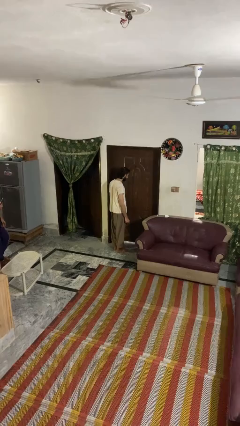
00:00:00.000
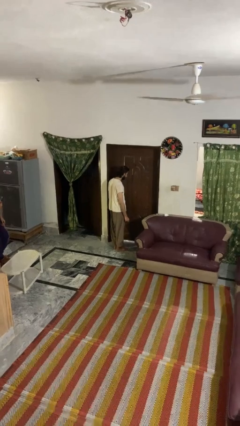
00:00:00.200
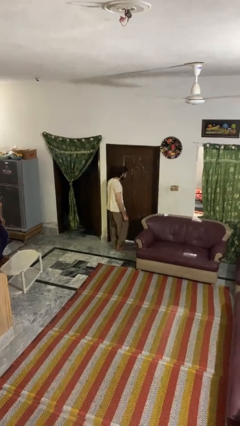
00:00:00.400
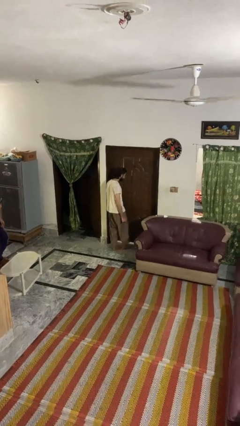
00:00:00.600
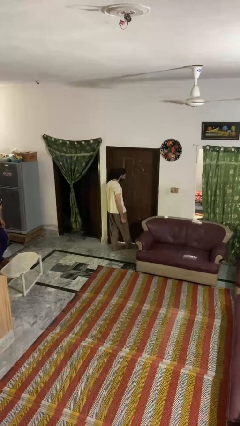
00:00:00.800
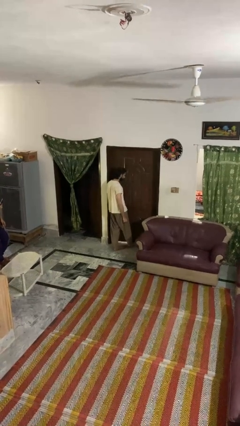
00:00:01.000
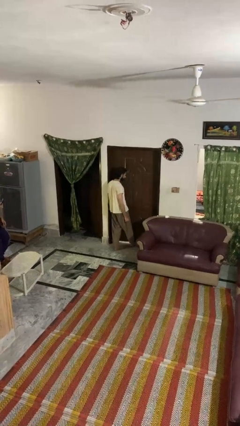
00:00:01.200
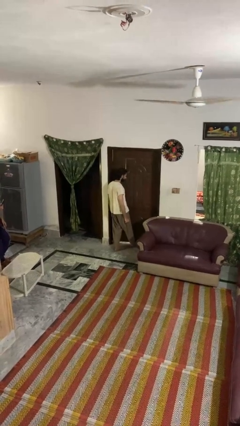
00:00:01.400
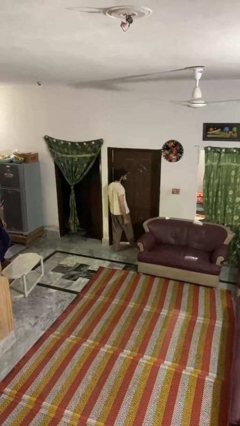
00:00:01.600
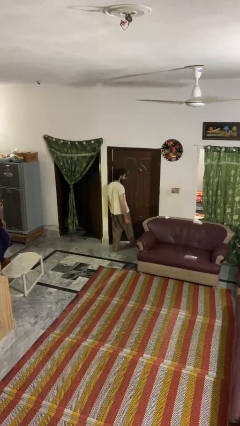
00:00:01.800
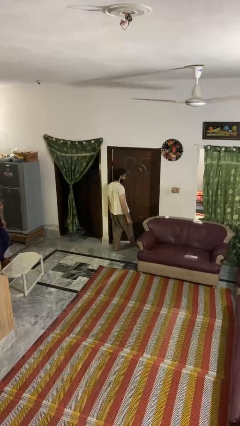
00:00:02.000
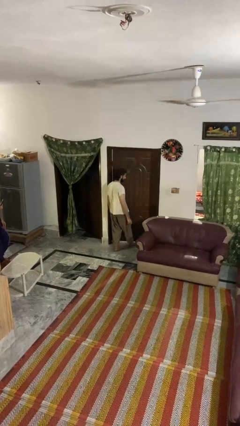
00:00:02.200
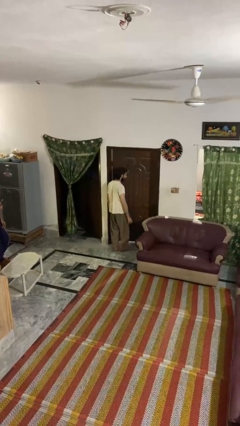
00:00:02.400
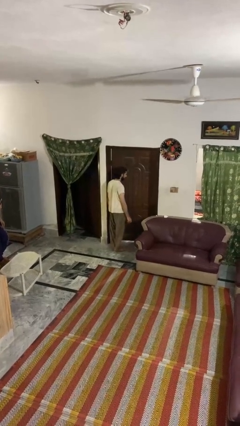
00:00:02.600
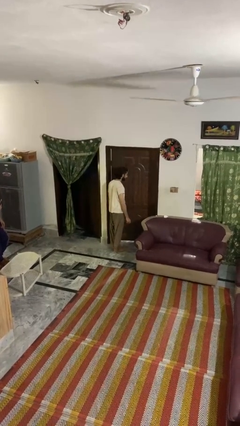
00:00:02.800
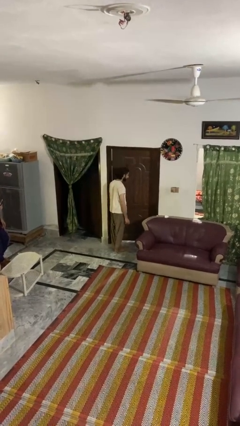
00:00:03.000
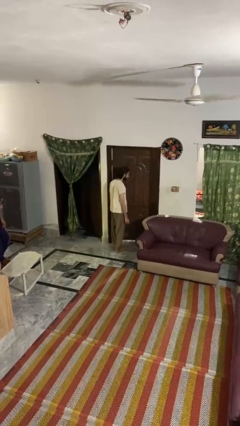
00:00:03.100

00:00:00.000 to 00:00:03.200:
person opens facility door

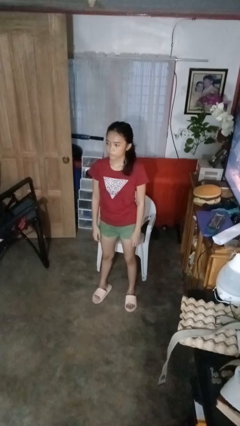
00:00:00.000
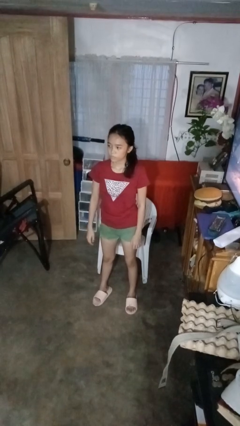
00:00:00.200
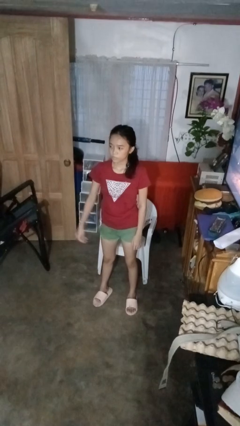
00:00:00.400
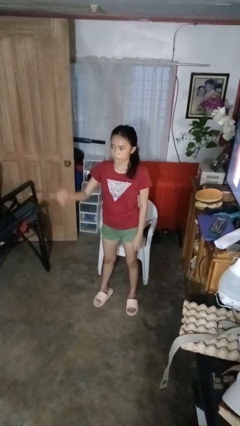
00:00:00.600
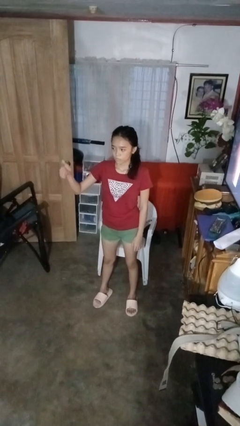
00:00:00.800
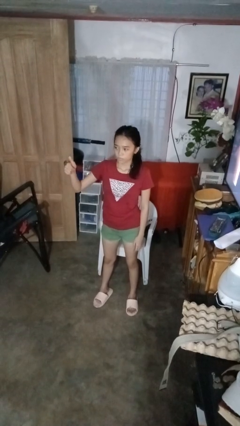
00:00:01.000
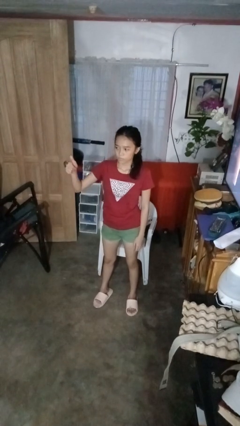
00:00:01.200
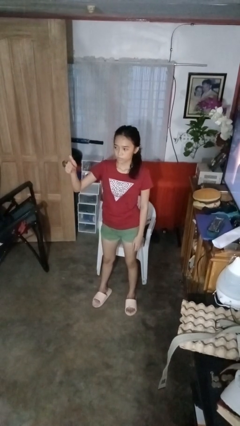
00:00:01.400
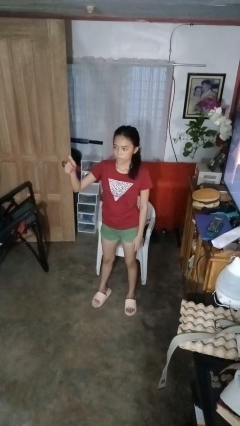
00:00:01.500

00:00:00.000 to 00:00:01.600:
person gestures thumbs up

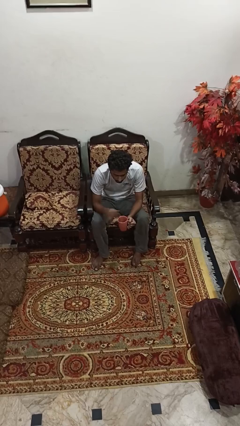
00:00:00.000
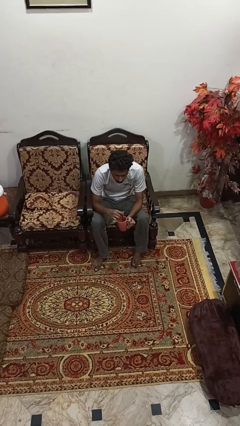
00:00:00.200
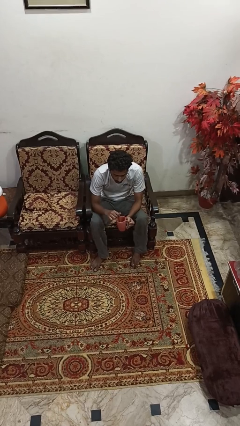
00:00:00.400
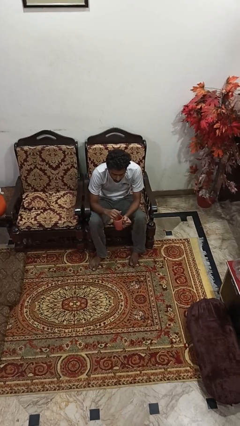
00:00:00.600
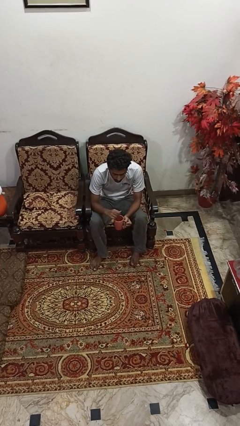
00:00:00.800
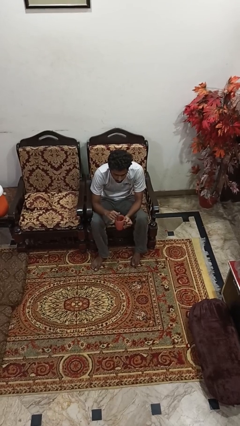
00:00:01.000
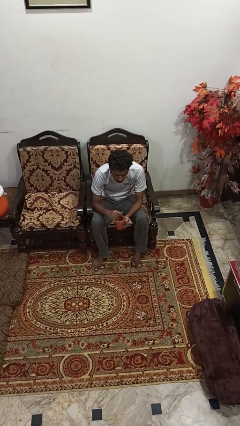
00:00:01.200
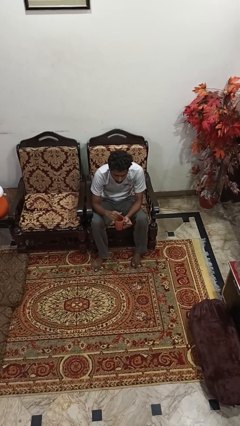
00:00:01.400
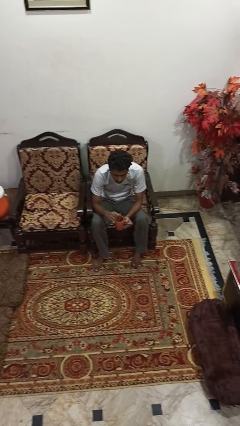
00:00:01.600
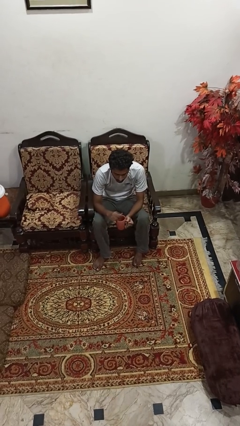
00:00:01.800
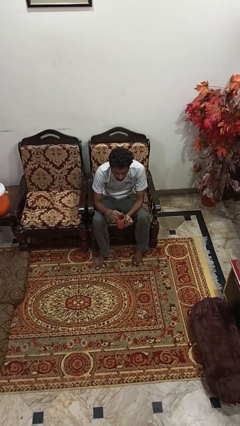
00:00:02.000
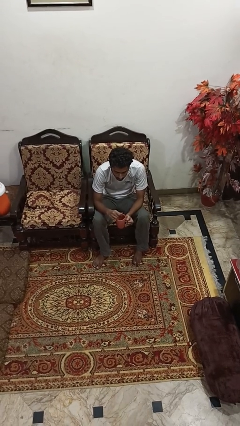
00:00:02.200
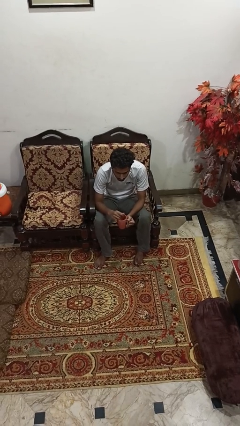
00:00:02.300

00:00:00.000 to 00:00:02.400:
person stirs mug

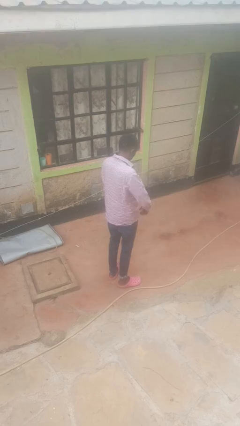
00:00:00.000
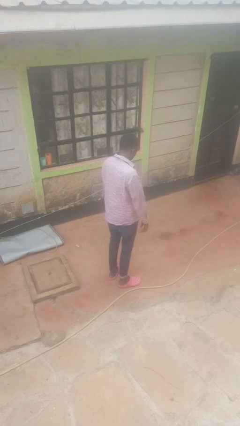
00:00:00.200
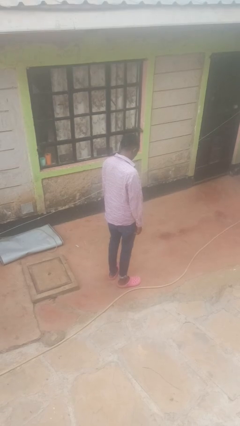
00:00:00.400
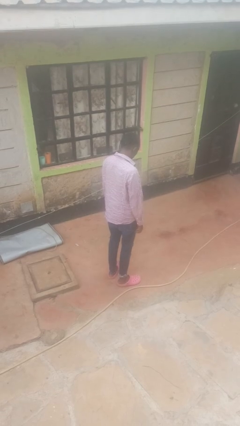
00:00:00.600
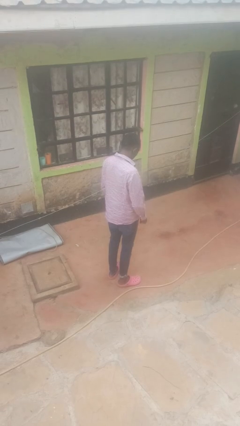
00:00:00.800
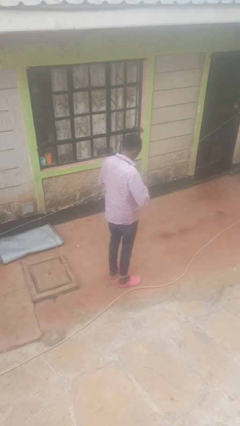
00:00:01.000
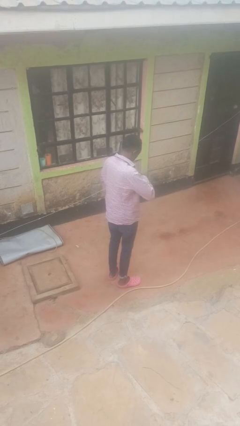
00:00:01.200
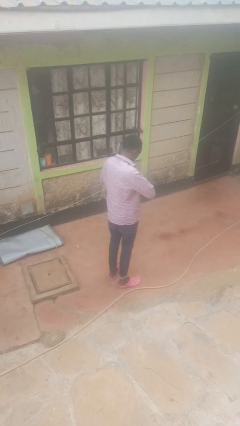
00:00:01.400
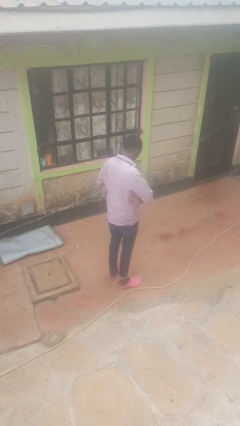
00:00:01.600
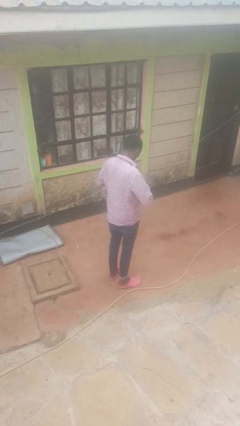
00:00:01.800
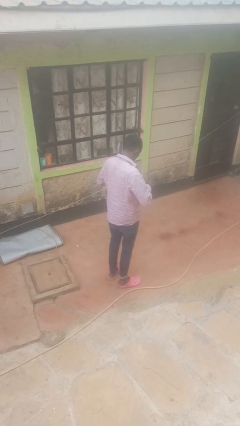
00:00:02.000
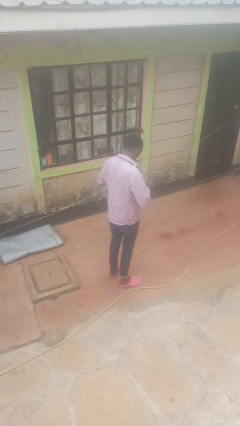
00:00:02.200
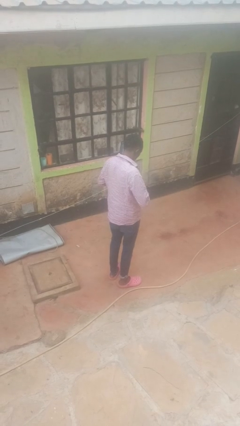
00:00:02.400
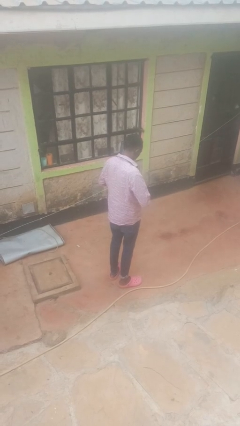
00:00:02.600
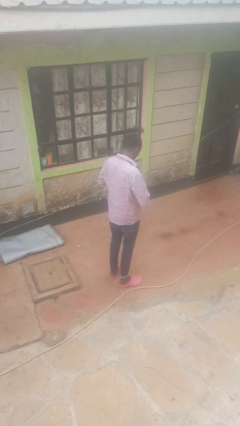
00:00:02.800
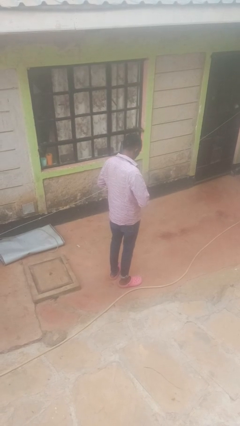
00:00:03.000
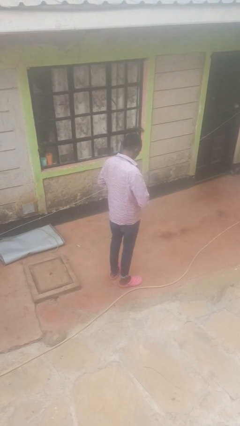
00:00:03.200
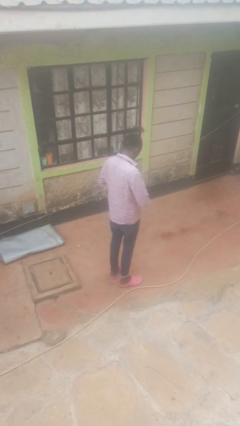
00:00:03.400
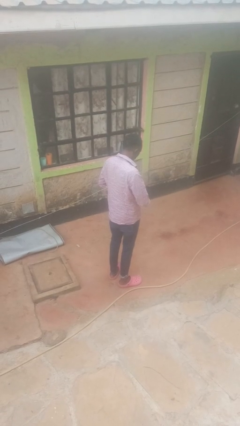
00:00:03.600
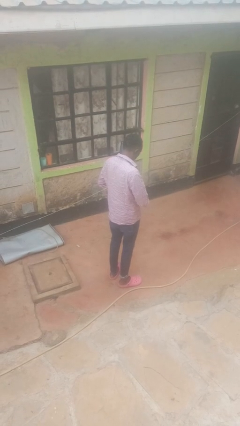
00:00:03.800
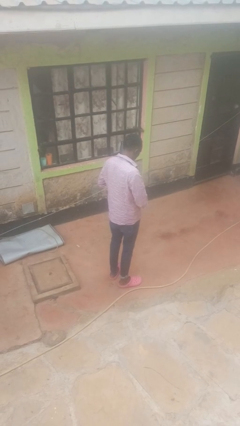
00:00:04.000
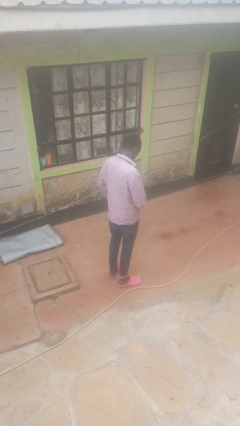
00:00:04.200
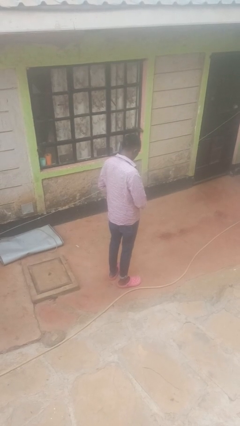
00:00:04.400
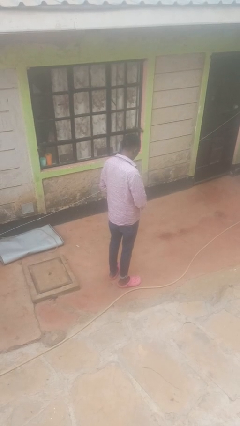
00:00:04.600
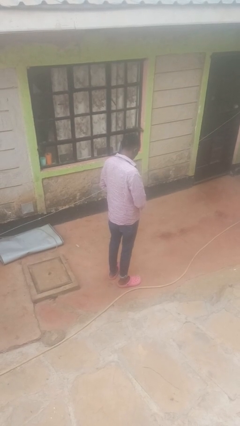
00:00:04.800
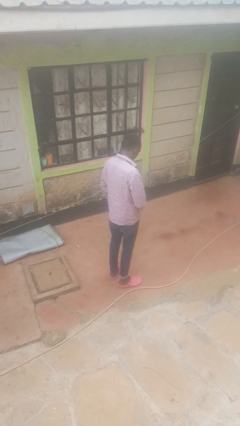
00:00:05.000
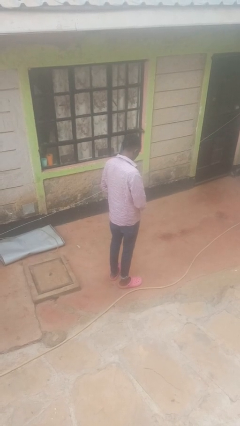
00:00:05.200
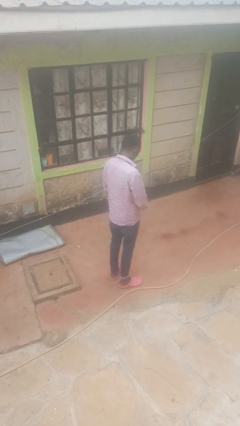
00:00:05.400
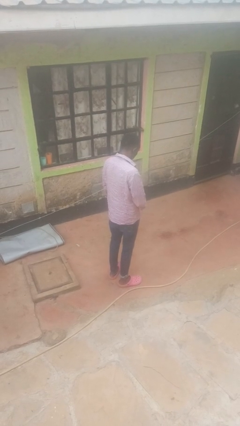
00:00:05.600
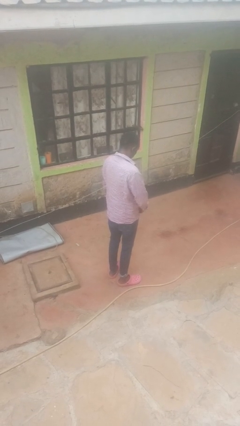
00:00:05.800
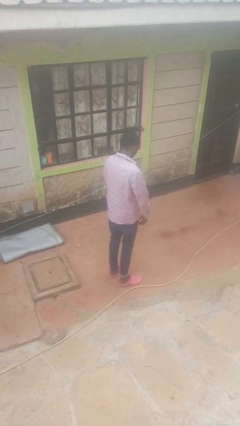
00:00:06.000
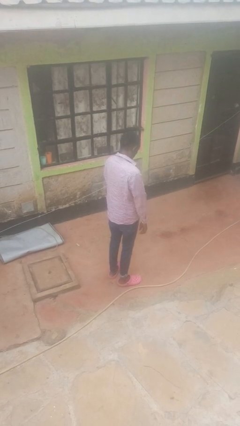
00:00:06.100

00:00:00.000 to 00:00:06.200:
person unbuttons shirt

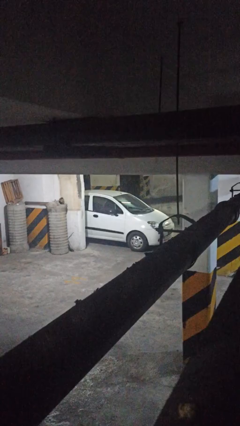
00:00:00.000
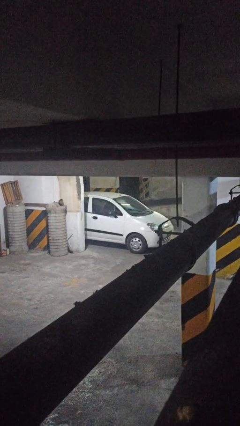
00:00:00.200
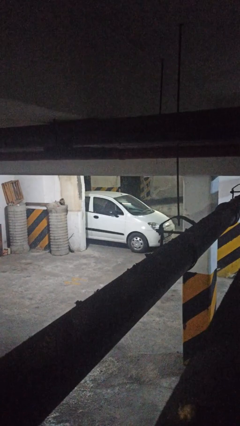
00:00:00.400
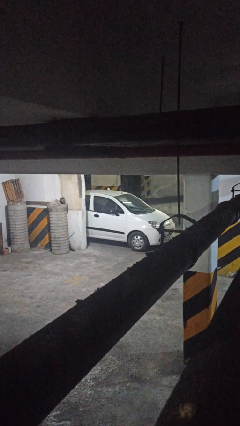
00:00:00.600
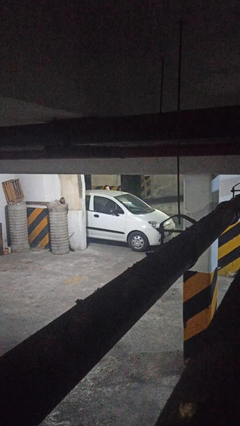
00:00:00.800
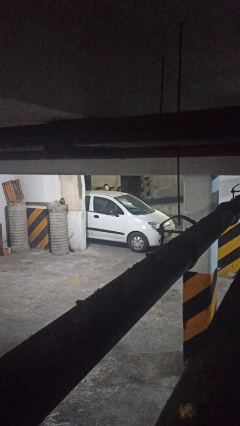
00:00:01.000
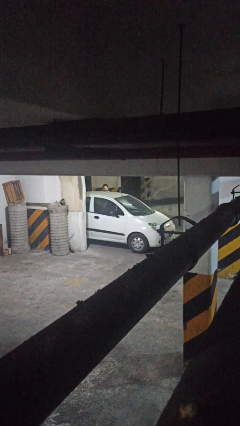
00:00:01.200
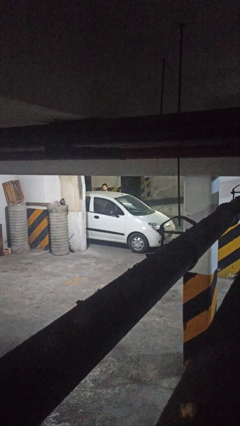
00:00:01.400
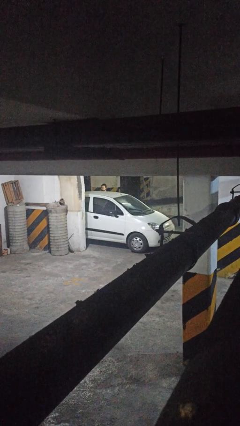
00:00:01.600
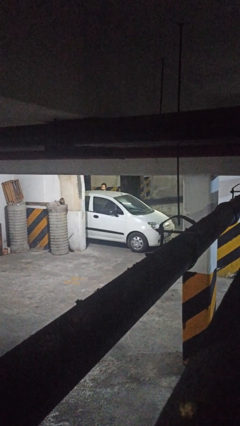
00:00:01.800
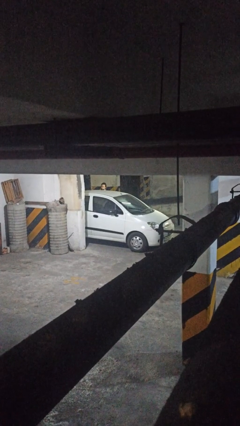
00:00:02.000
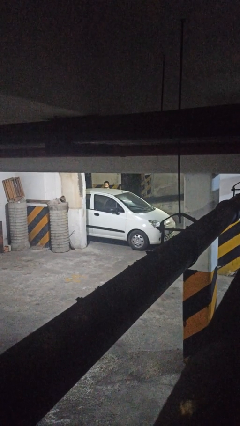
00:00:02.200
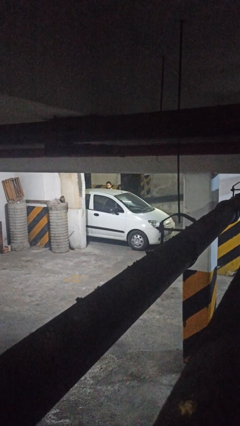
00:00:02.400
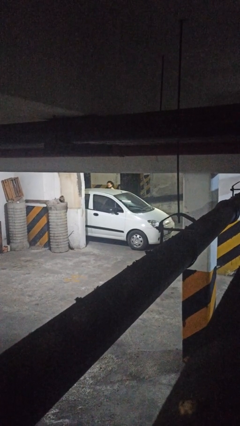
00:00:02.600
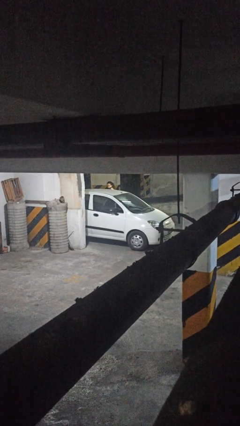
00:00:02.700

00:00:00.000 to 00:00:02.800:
car drops off person

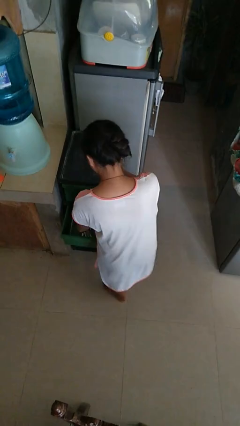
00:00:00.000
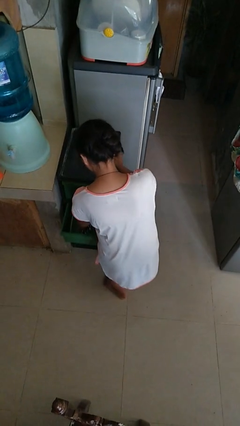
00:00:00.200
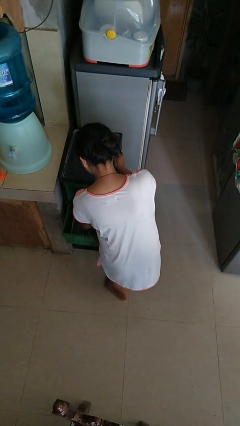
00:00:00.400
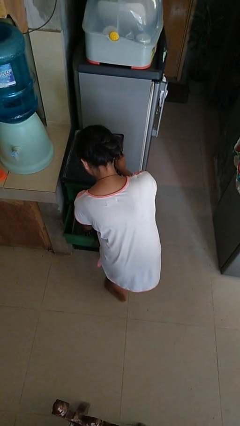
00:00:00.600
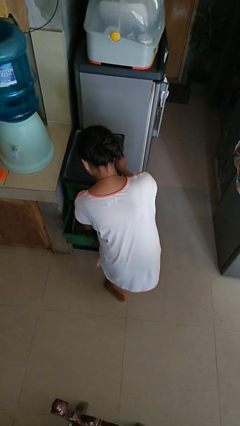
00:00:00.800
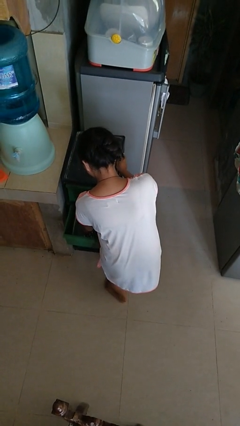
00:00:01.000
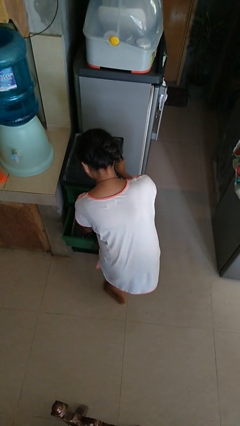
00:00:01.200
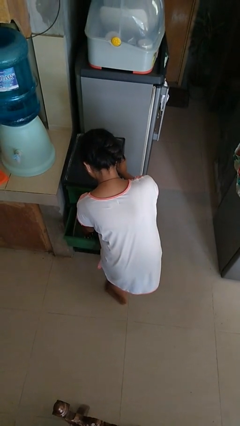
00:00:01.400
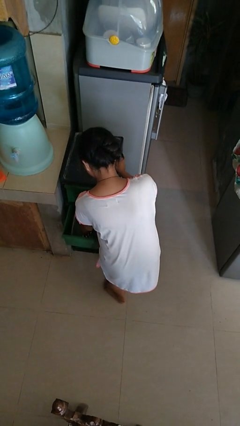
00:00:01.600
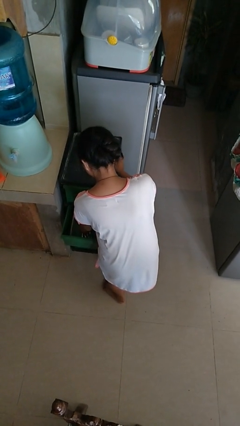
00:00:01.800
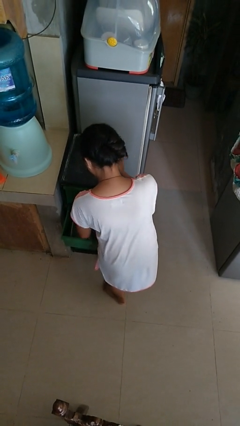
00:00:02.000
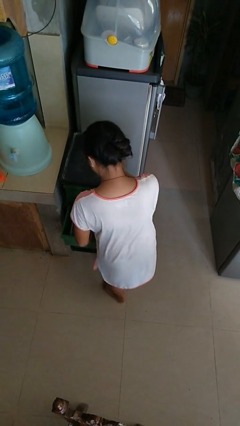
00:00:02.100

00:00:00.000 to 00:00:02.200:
person puts object into kitchen drawer
